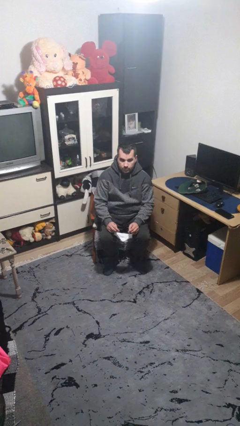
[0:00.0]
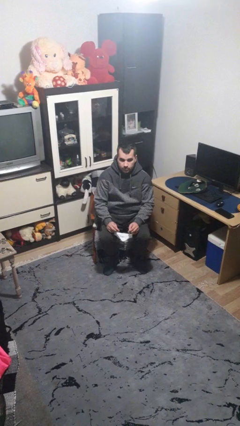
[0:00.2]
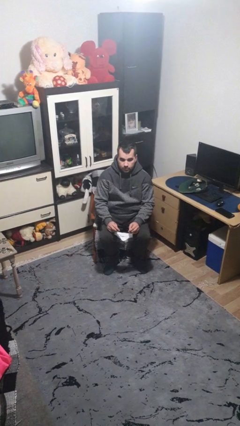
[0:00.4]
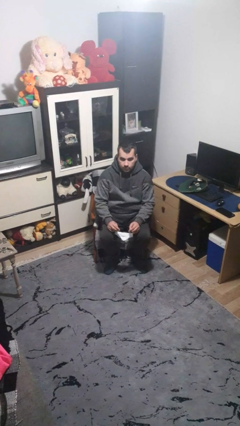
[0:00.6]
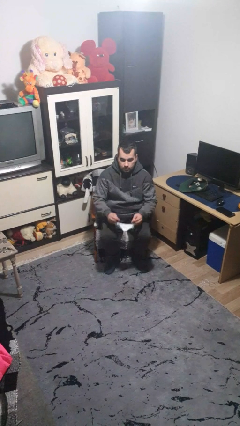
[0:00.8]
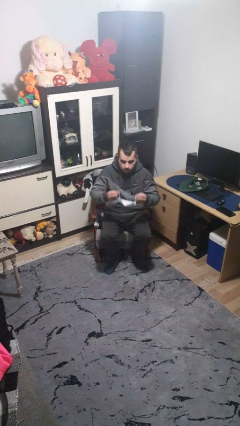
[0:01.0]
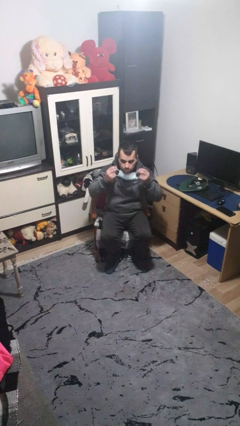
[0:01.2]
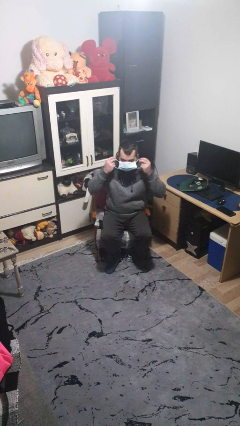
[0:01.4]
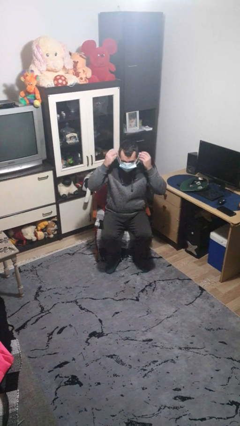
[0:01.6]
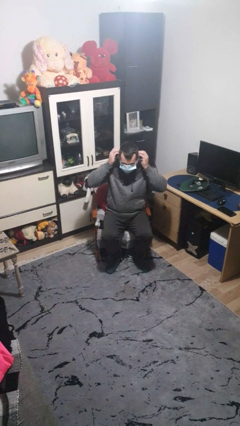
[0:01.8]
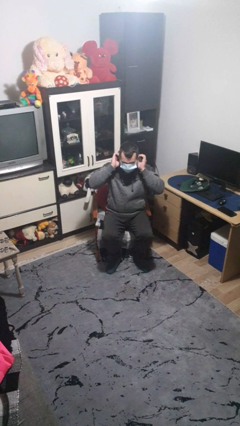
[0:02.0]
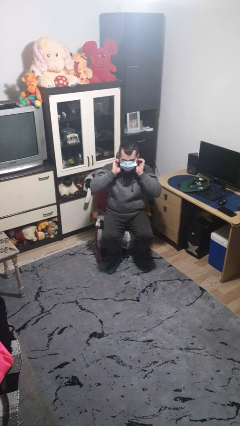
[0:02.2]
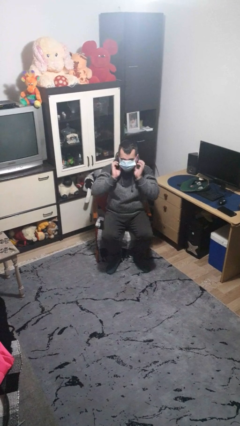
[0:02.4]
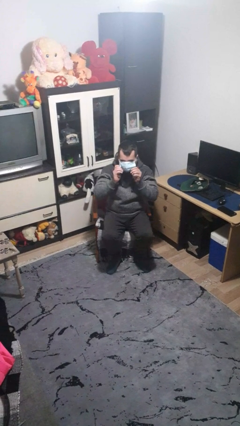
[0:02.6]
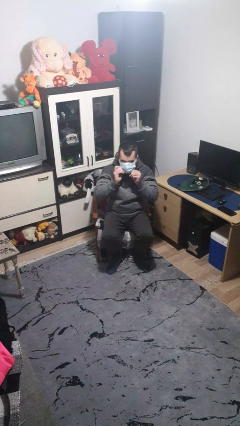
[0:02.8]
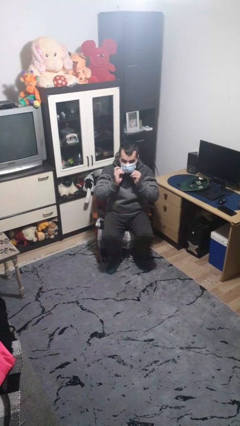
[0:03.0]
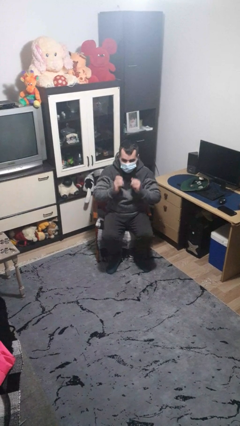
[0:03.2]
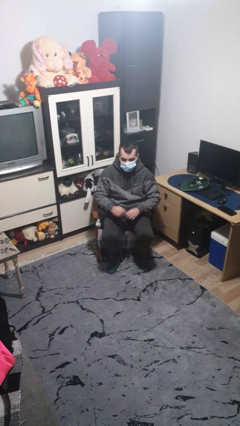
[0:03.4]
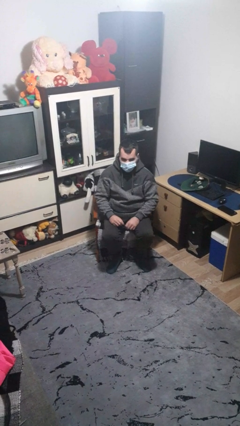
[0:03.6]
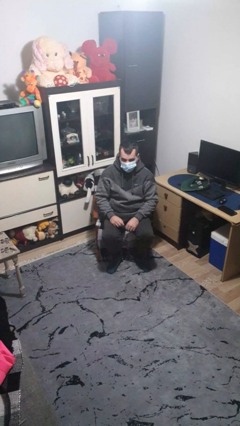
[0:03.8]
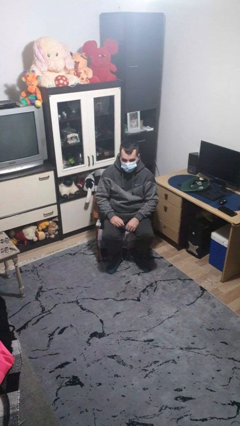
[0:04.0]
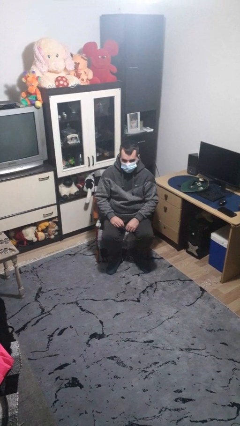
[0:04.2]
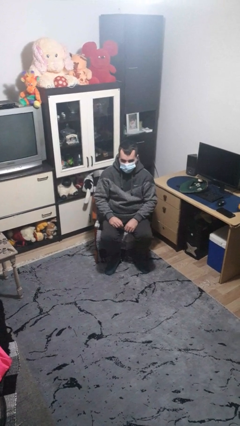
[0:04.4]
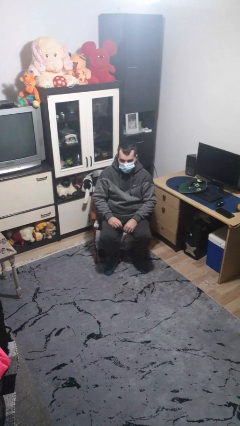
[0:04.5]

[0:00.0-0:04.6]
person puts on facemask

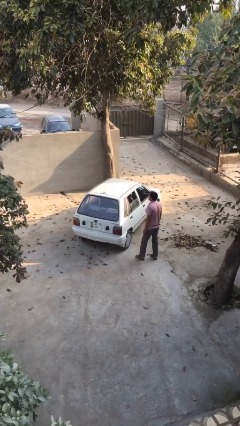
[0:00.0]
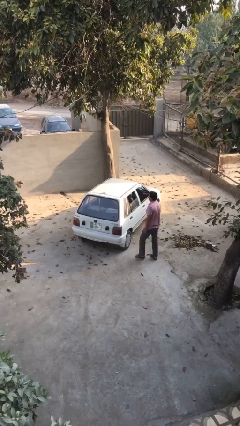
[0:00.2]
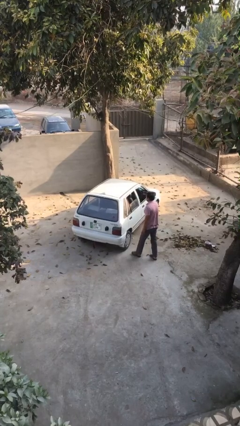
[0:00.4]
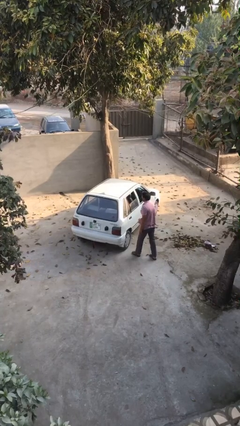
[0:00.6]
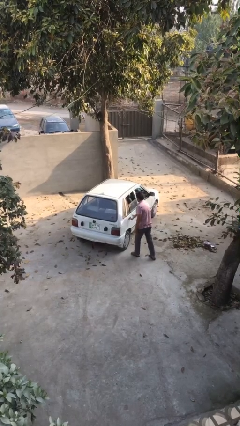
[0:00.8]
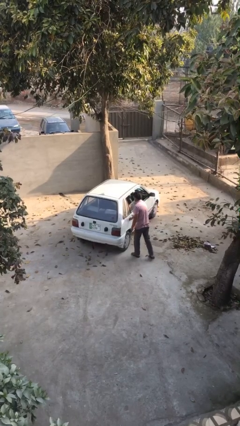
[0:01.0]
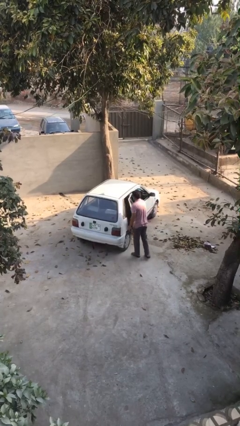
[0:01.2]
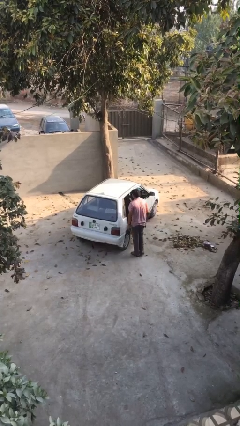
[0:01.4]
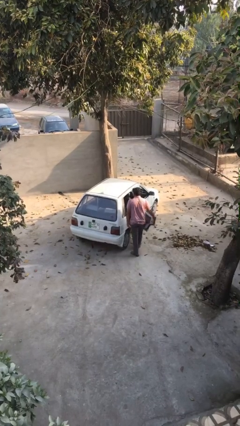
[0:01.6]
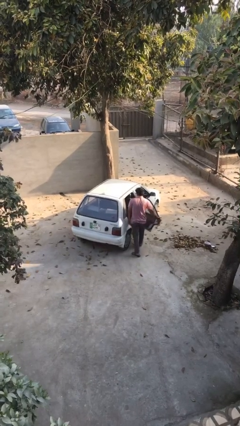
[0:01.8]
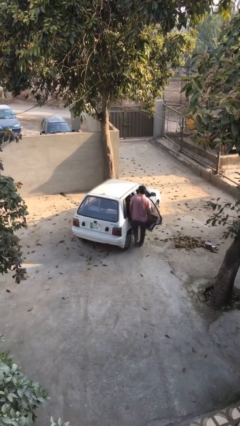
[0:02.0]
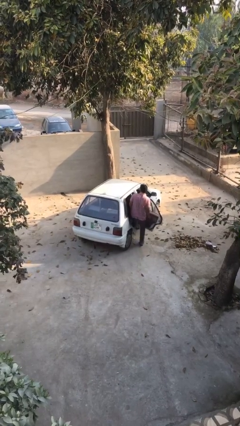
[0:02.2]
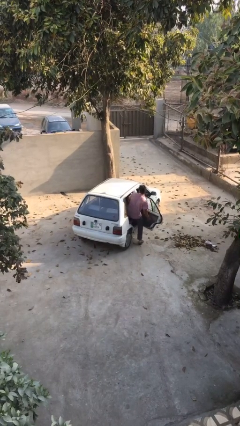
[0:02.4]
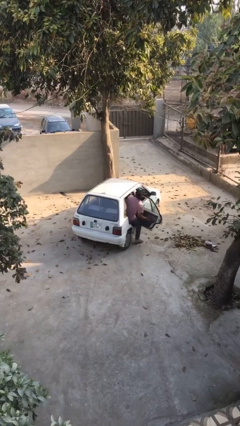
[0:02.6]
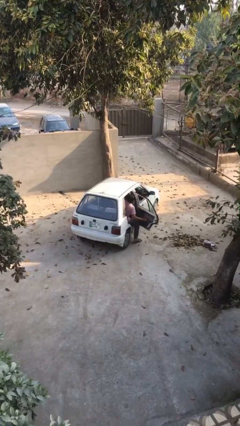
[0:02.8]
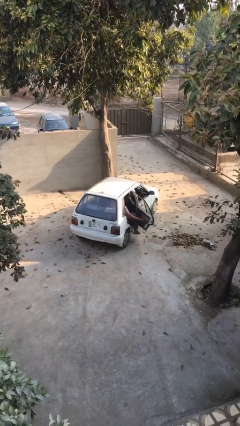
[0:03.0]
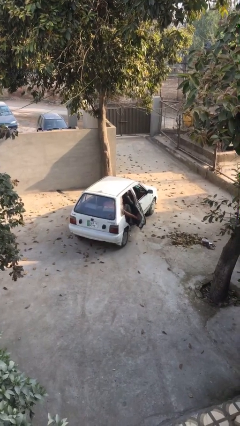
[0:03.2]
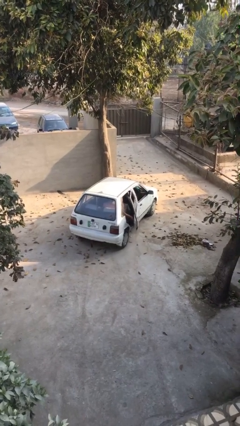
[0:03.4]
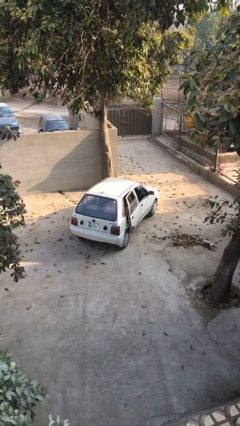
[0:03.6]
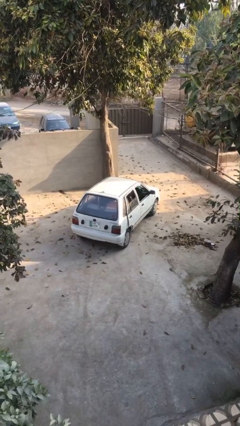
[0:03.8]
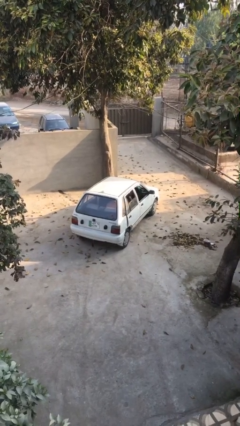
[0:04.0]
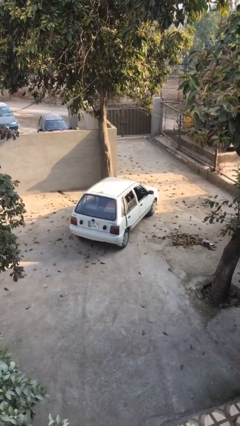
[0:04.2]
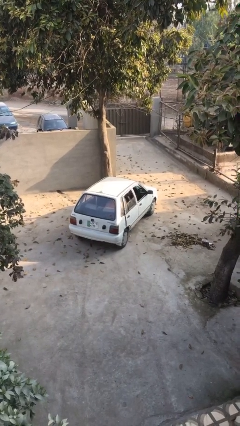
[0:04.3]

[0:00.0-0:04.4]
car picks up person

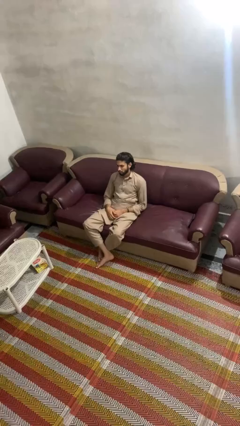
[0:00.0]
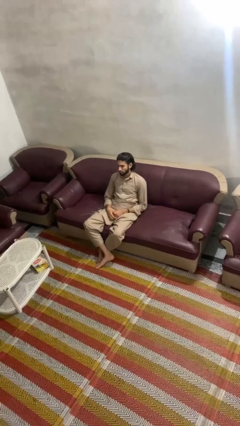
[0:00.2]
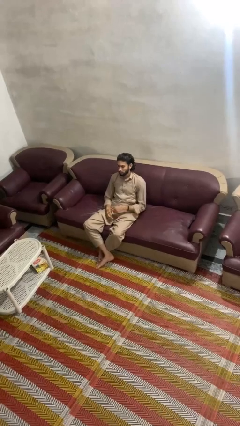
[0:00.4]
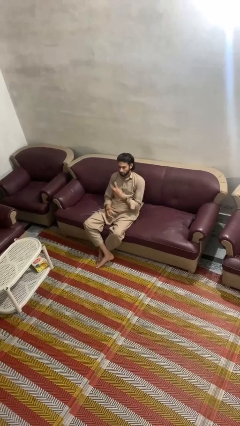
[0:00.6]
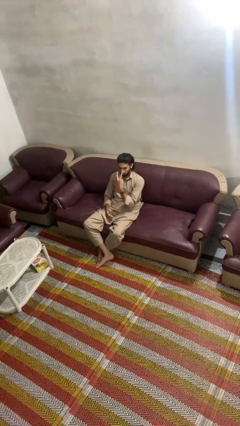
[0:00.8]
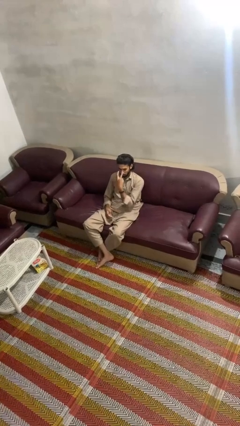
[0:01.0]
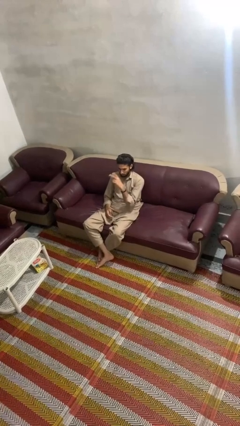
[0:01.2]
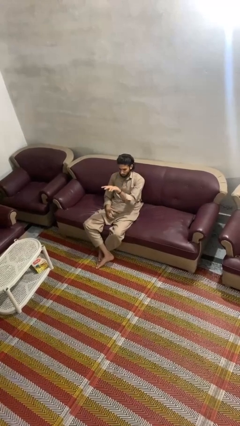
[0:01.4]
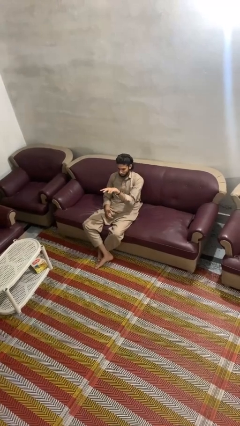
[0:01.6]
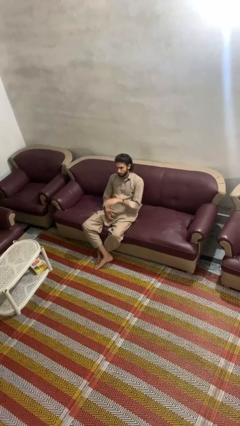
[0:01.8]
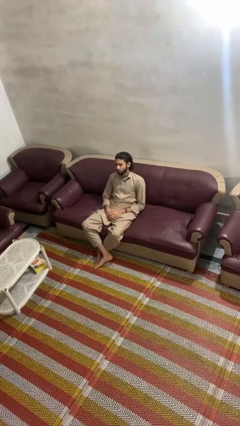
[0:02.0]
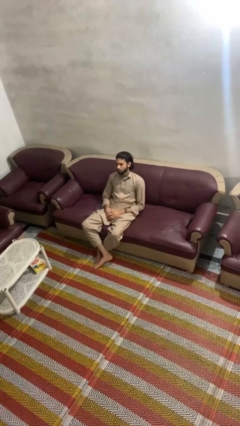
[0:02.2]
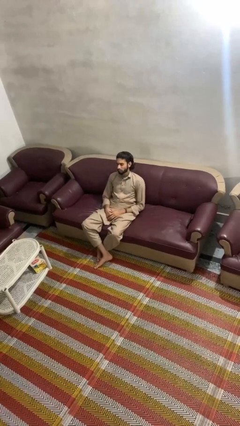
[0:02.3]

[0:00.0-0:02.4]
person gestures watch closely

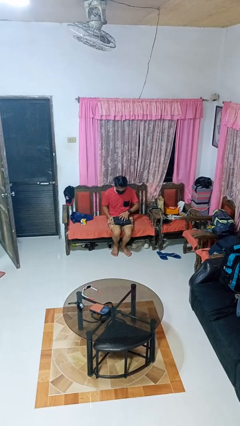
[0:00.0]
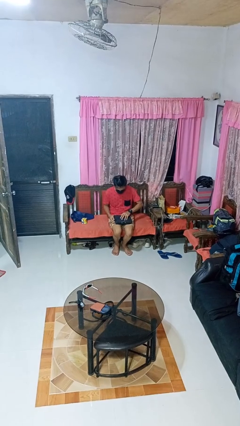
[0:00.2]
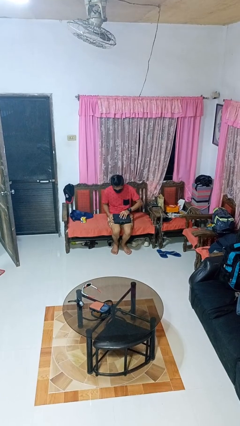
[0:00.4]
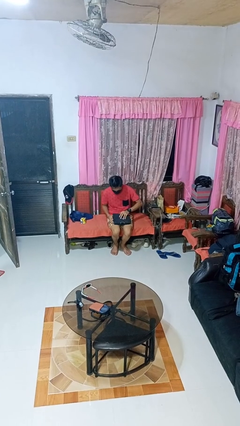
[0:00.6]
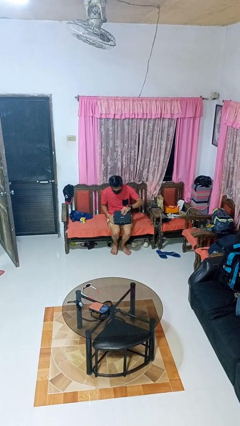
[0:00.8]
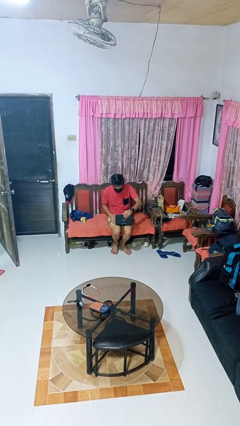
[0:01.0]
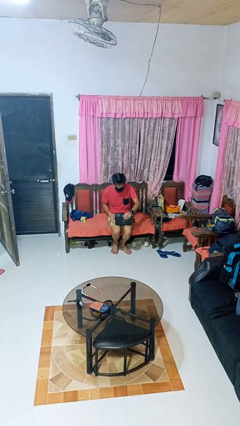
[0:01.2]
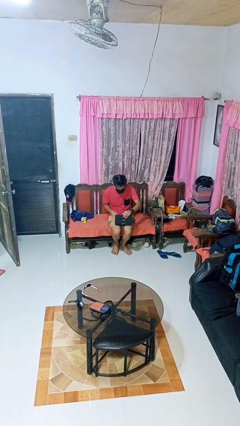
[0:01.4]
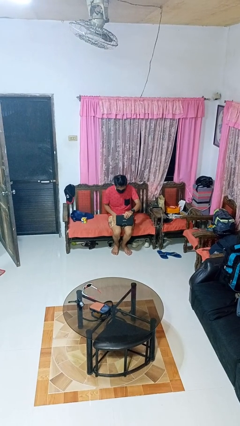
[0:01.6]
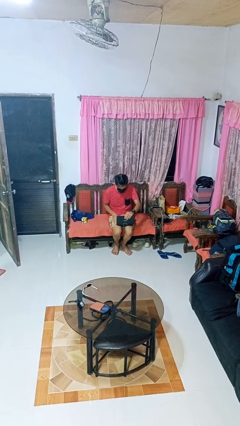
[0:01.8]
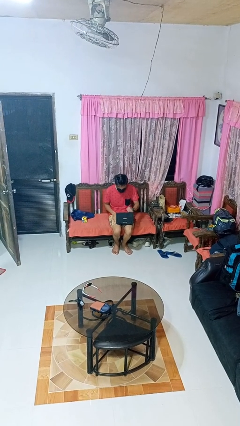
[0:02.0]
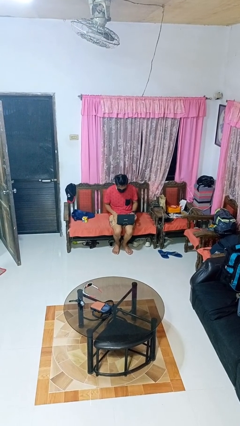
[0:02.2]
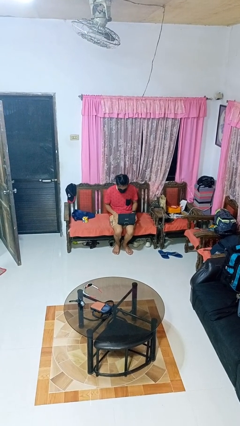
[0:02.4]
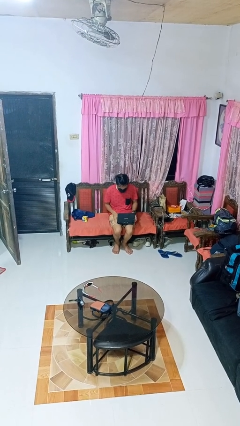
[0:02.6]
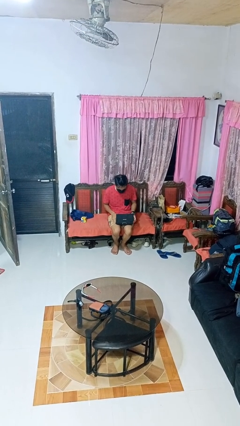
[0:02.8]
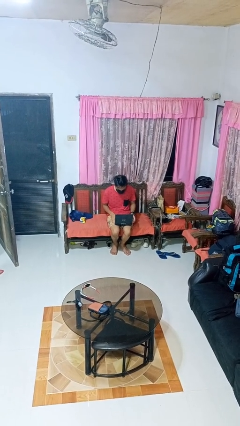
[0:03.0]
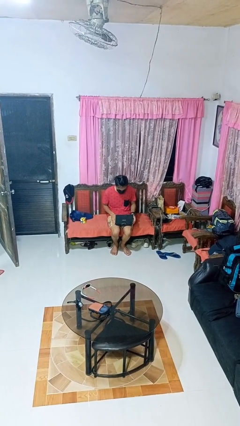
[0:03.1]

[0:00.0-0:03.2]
person opens laptop

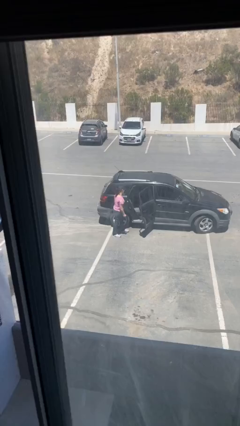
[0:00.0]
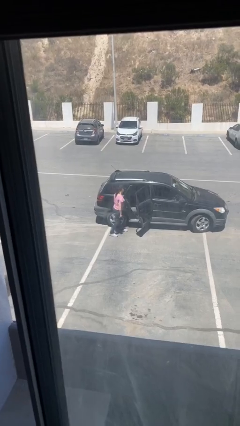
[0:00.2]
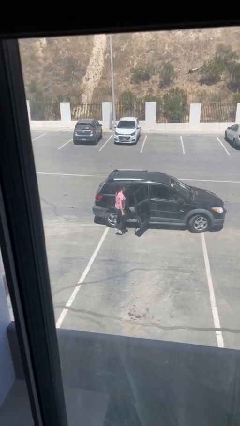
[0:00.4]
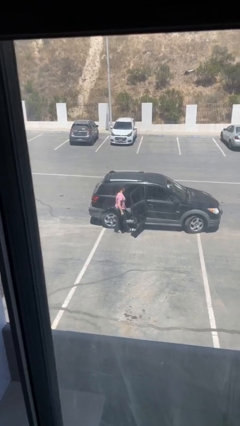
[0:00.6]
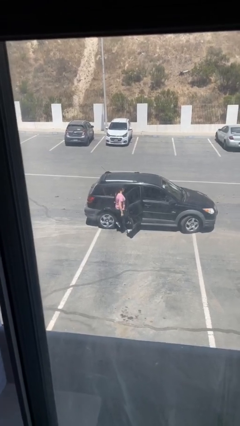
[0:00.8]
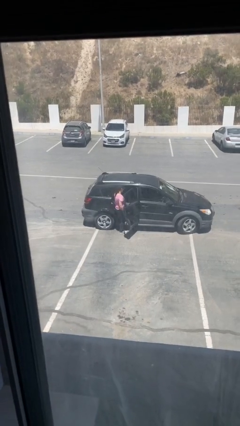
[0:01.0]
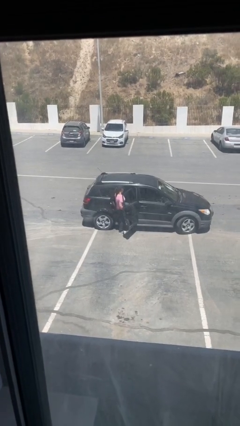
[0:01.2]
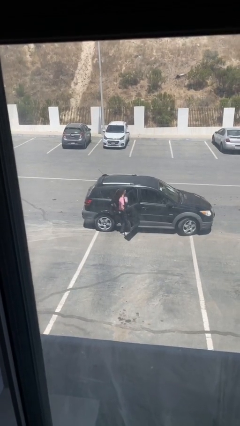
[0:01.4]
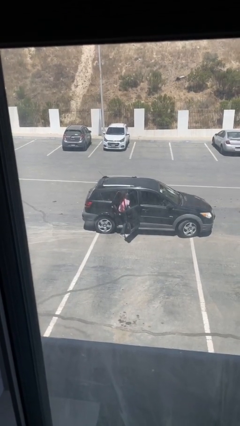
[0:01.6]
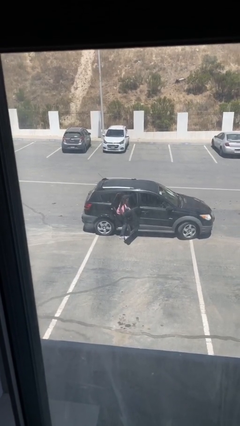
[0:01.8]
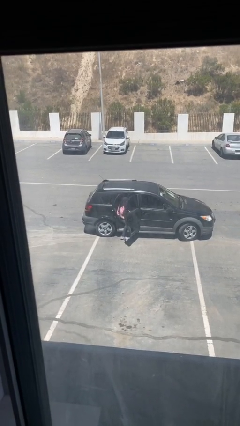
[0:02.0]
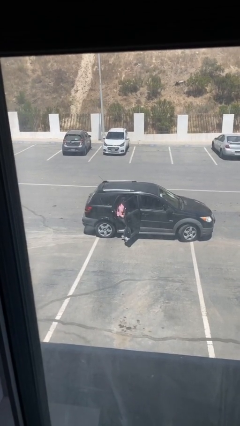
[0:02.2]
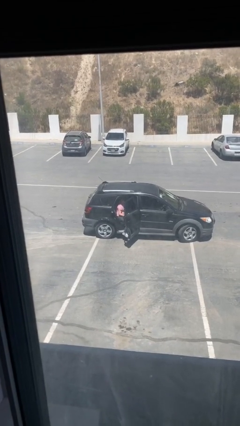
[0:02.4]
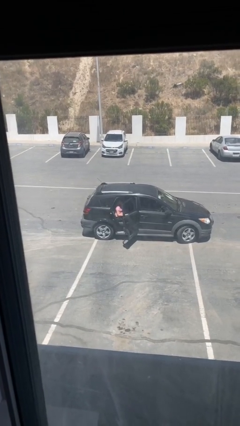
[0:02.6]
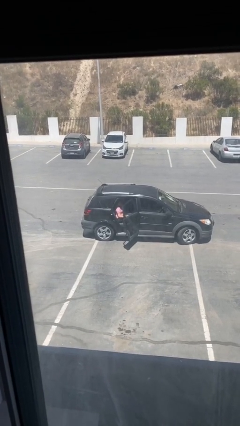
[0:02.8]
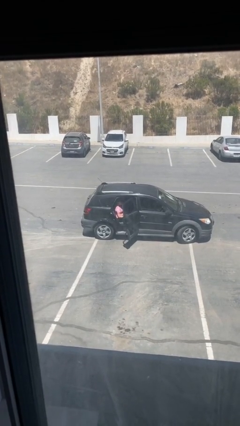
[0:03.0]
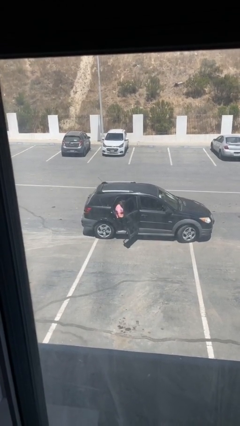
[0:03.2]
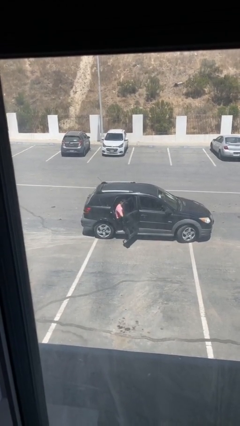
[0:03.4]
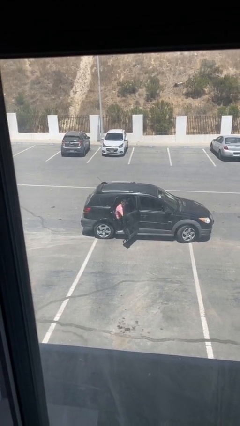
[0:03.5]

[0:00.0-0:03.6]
person enters car
